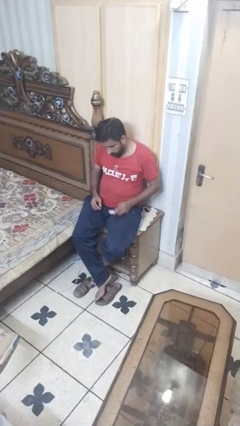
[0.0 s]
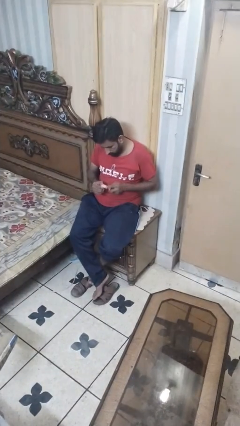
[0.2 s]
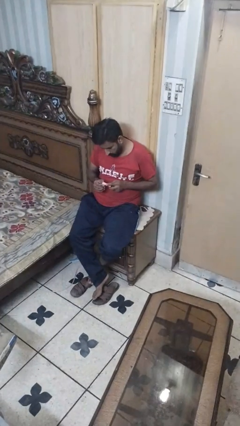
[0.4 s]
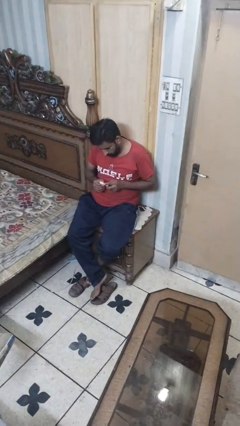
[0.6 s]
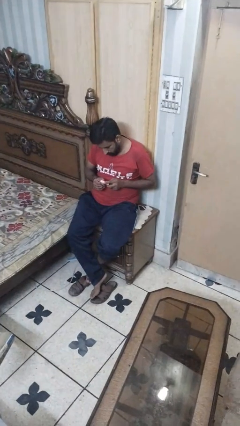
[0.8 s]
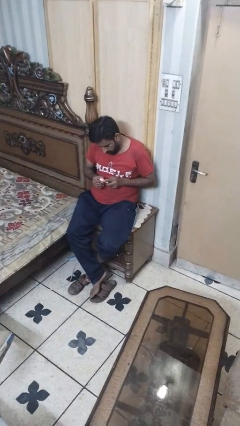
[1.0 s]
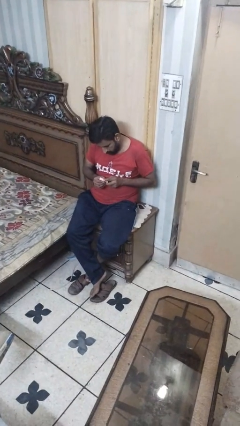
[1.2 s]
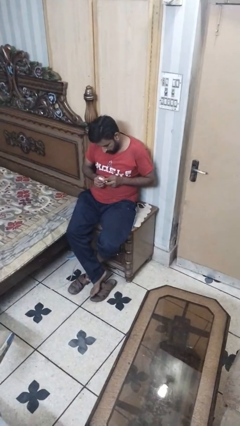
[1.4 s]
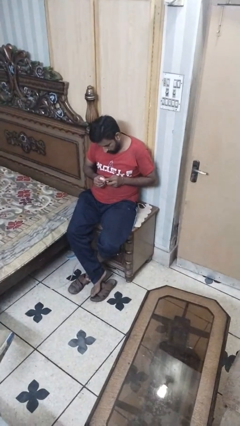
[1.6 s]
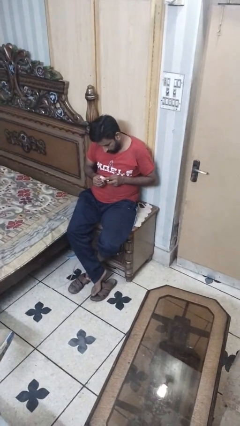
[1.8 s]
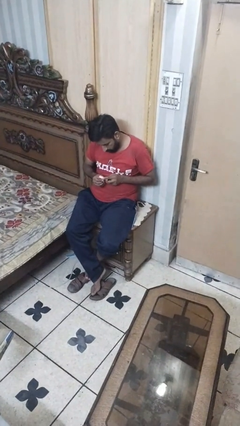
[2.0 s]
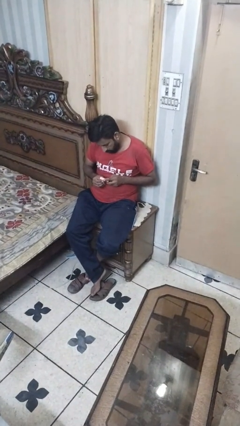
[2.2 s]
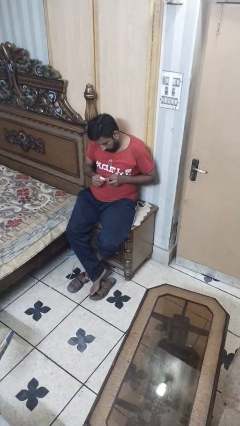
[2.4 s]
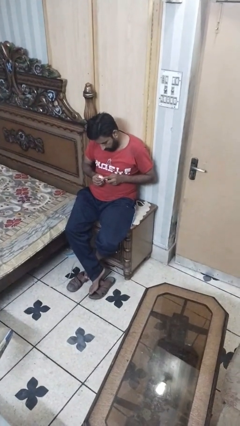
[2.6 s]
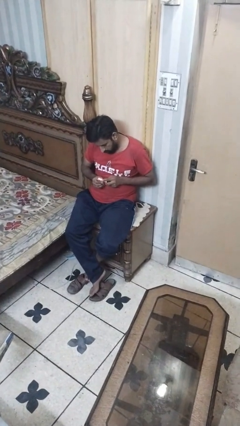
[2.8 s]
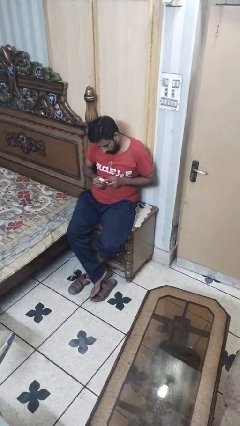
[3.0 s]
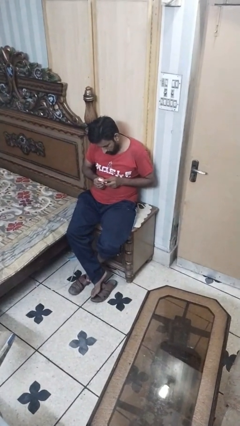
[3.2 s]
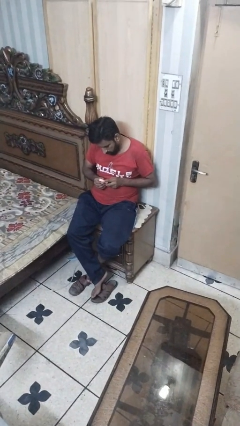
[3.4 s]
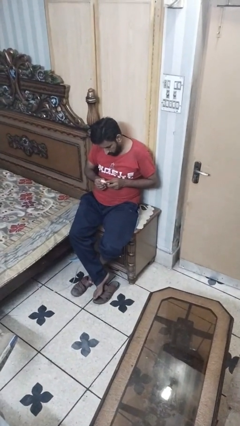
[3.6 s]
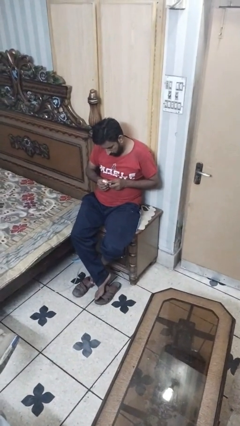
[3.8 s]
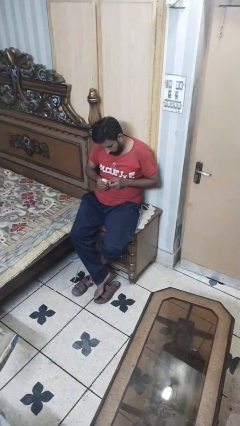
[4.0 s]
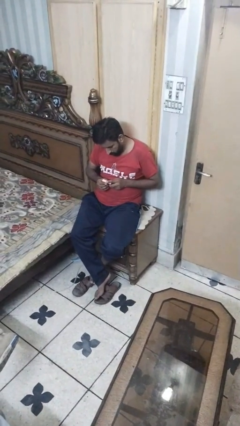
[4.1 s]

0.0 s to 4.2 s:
person files fingernails

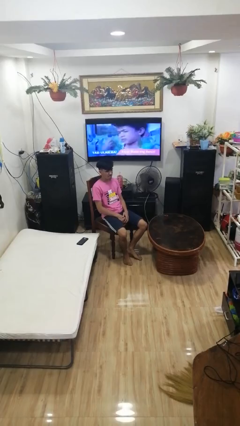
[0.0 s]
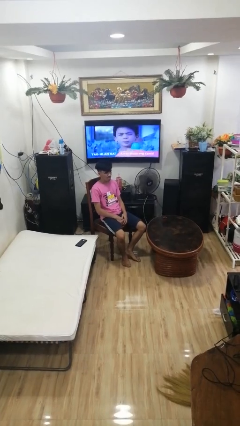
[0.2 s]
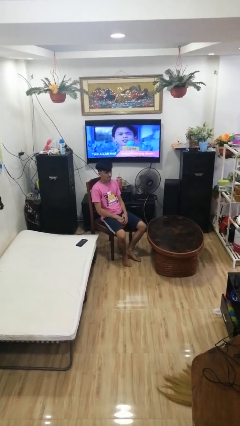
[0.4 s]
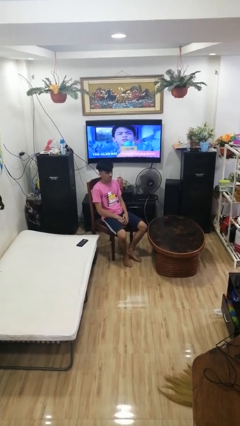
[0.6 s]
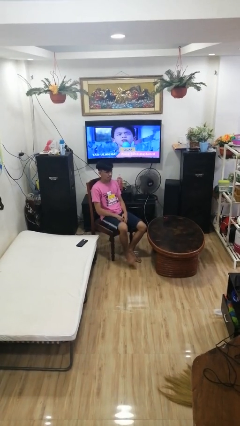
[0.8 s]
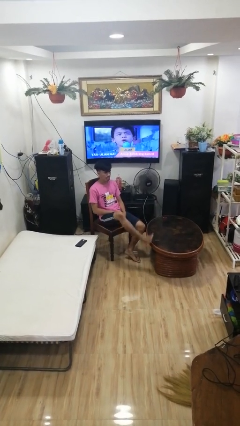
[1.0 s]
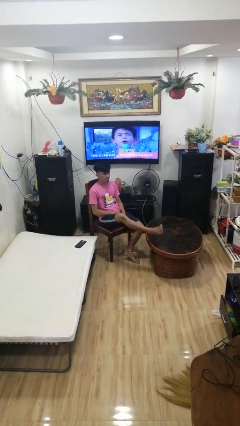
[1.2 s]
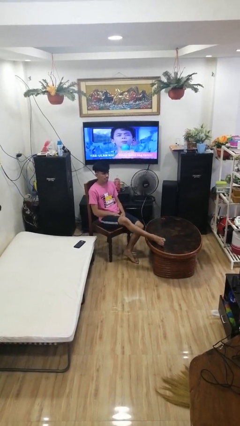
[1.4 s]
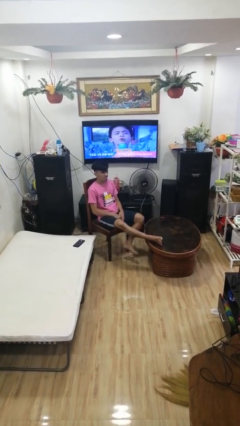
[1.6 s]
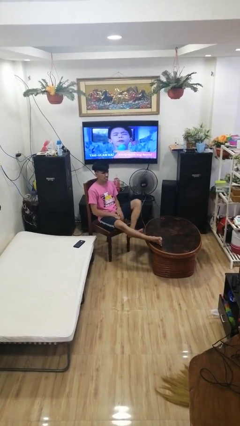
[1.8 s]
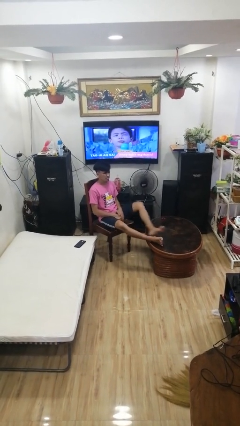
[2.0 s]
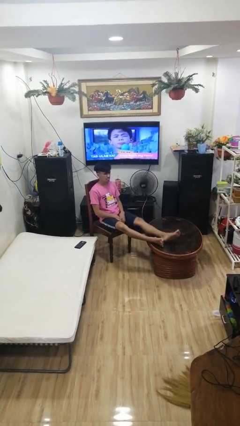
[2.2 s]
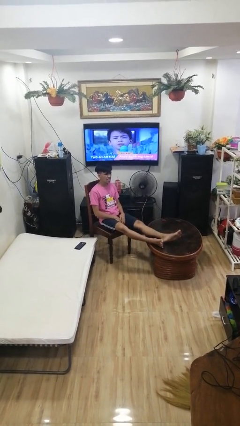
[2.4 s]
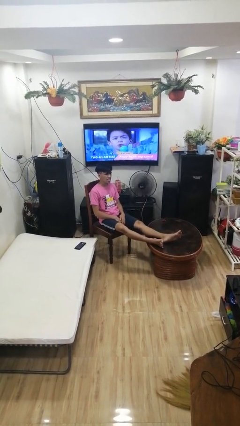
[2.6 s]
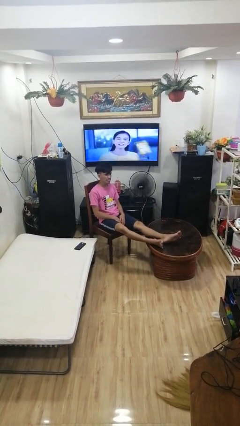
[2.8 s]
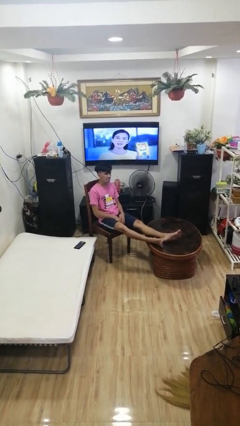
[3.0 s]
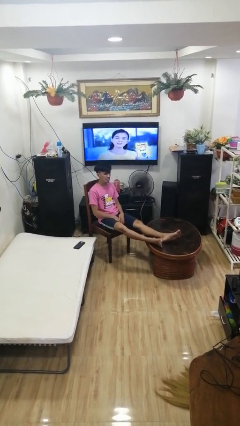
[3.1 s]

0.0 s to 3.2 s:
person puts feet up

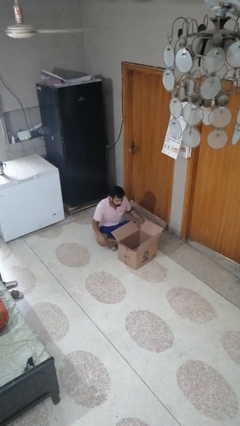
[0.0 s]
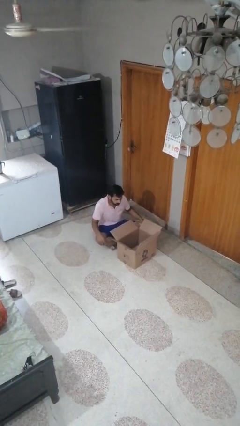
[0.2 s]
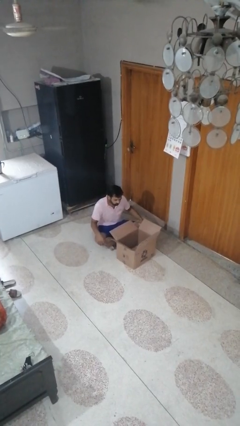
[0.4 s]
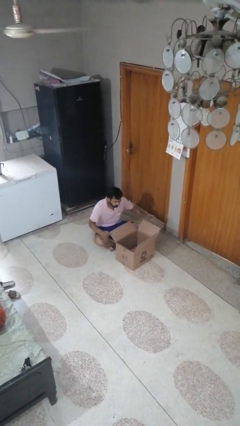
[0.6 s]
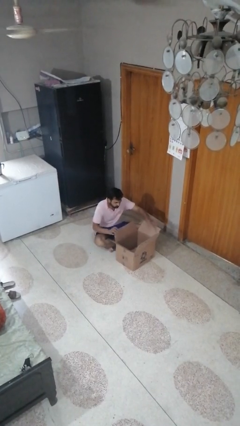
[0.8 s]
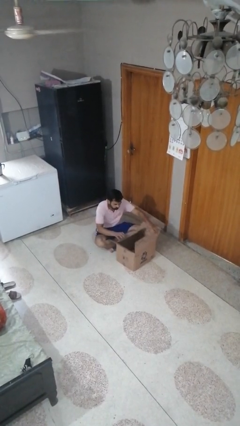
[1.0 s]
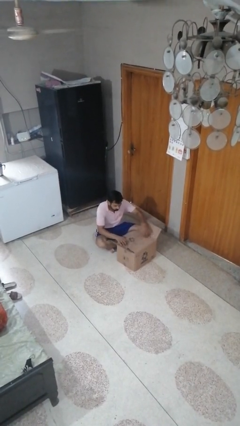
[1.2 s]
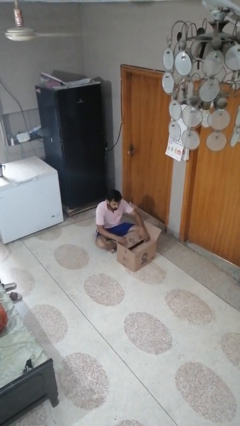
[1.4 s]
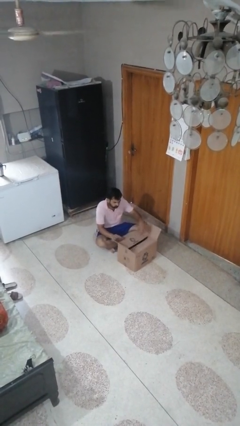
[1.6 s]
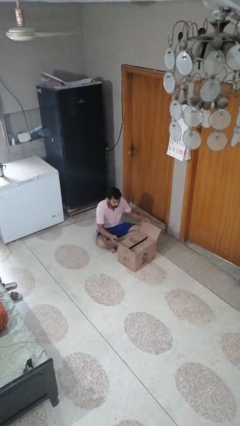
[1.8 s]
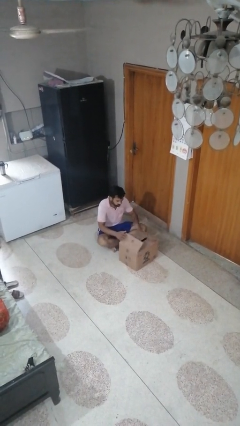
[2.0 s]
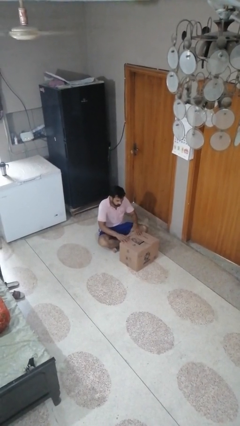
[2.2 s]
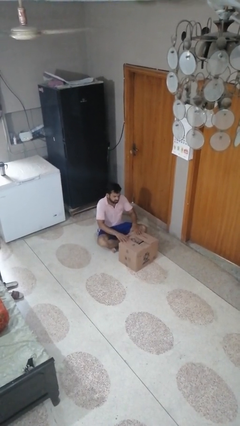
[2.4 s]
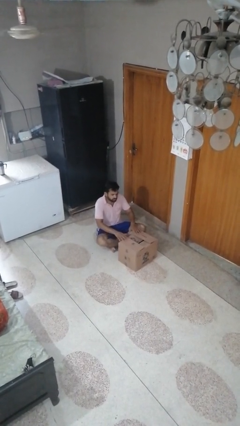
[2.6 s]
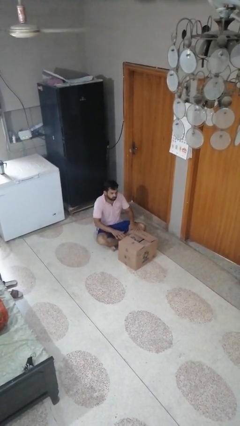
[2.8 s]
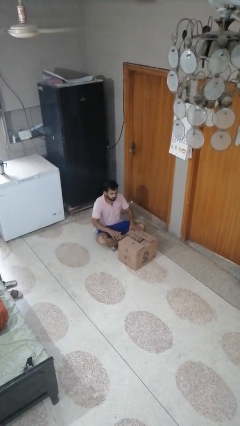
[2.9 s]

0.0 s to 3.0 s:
person closes box

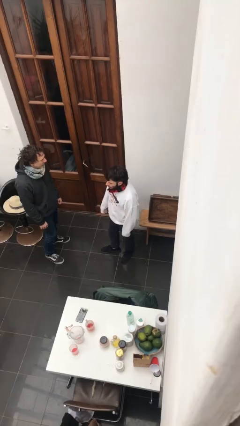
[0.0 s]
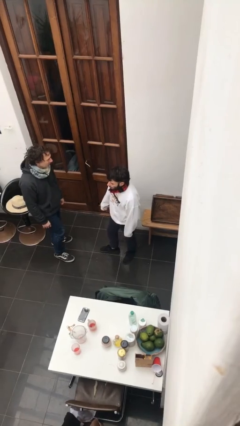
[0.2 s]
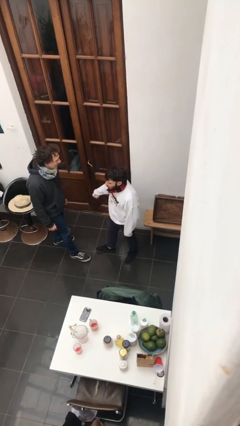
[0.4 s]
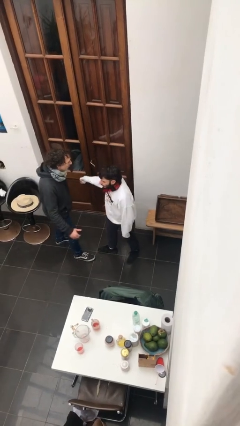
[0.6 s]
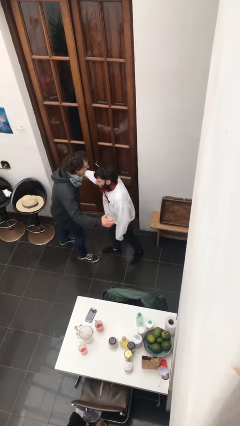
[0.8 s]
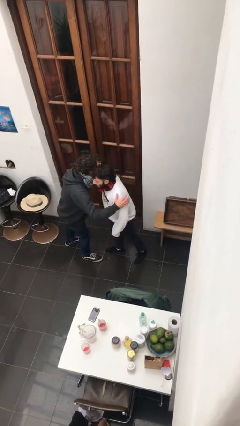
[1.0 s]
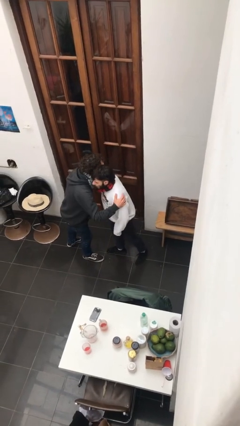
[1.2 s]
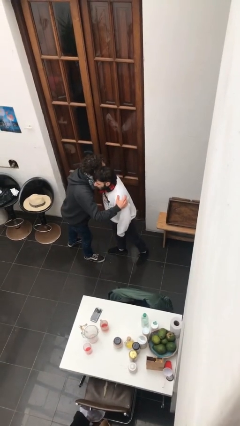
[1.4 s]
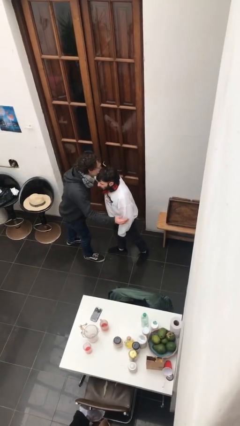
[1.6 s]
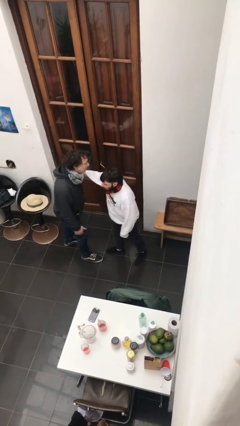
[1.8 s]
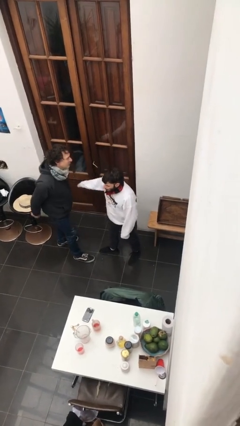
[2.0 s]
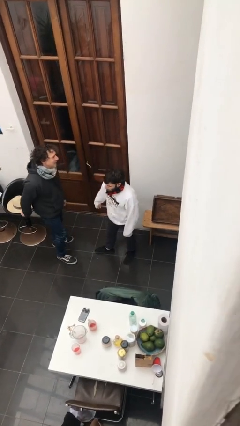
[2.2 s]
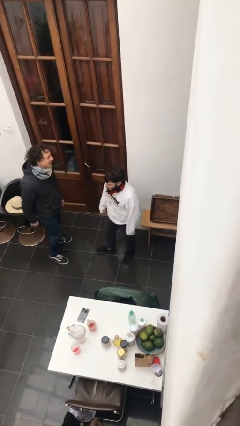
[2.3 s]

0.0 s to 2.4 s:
person kisses cheek of person

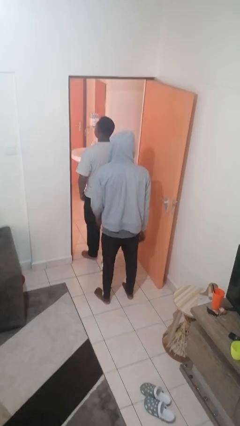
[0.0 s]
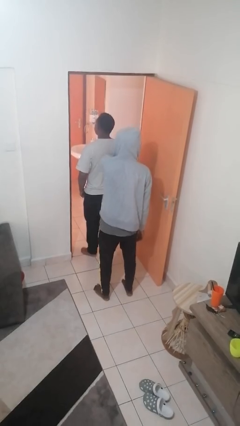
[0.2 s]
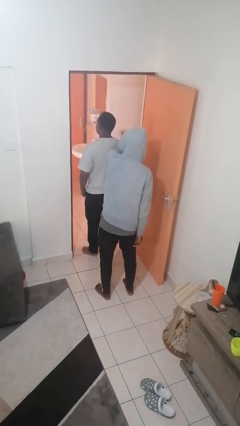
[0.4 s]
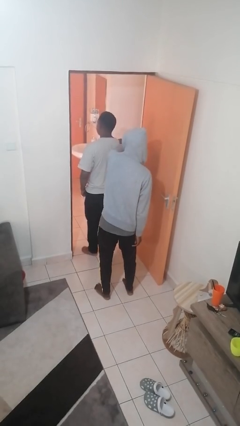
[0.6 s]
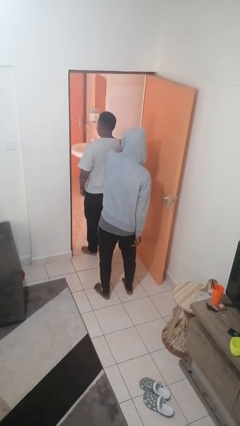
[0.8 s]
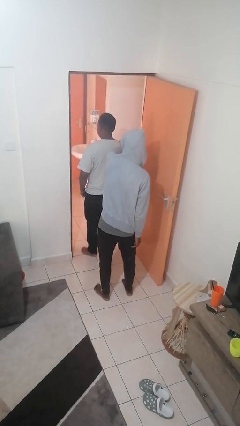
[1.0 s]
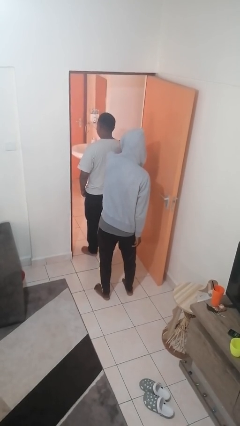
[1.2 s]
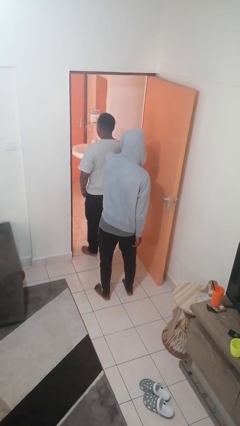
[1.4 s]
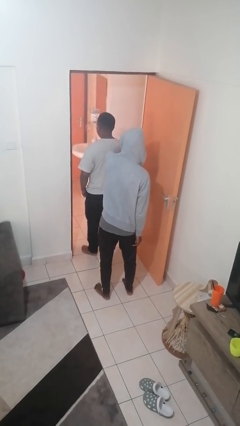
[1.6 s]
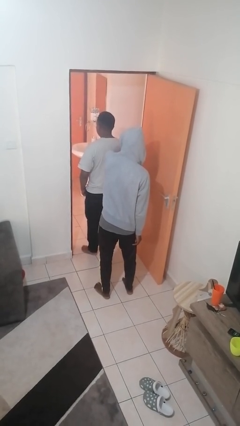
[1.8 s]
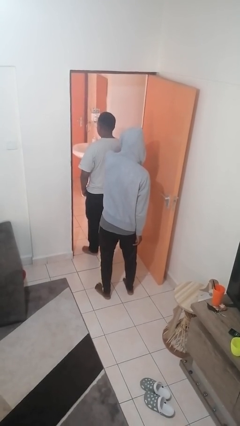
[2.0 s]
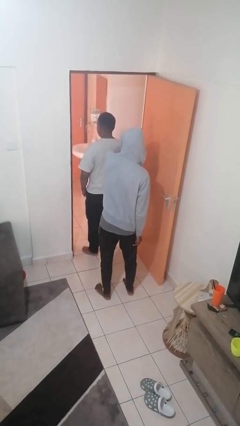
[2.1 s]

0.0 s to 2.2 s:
person grabs person by shoulder

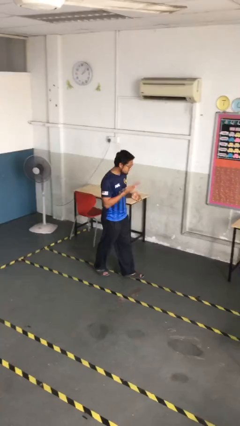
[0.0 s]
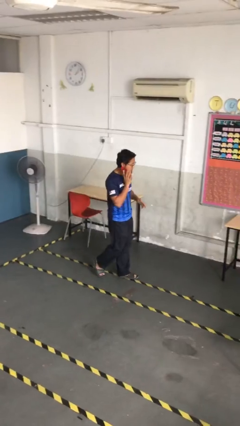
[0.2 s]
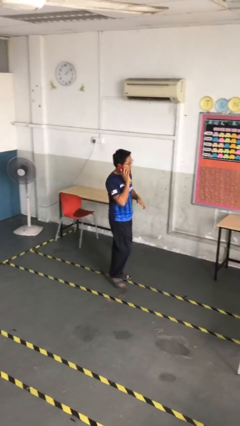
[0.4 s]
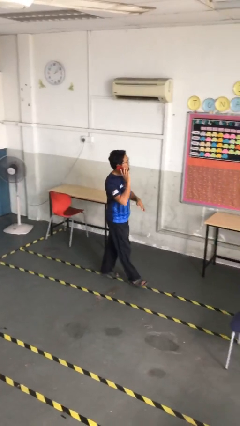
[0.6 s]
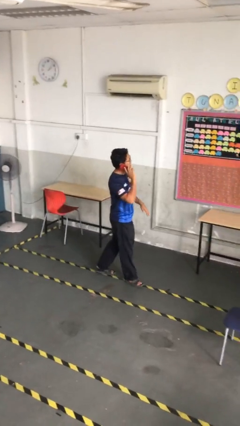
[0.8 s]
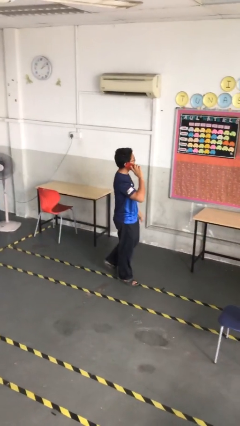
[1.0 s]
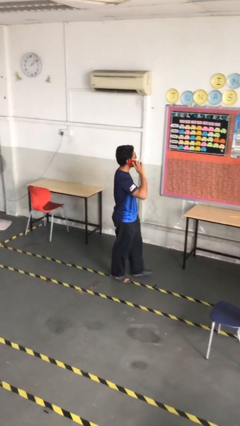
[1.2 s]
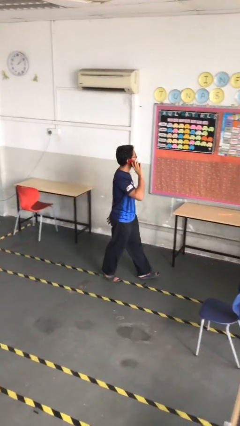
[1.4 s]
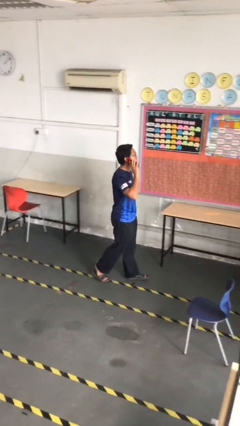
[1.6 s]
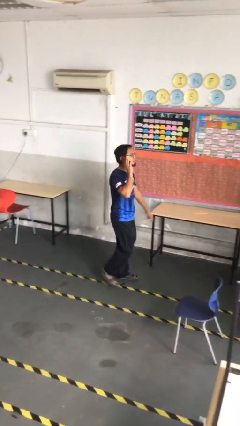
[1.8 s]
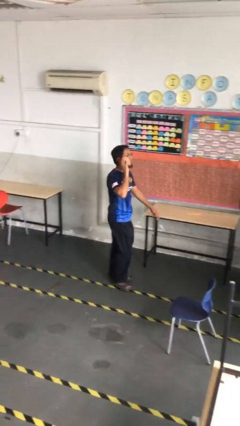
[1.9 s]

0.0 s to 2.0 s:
person talks on phone

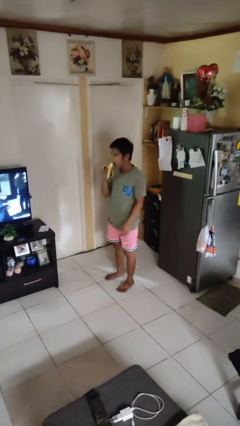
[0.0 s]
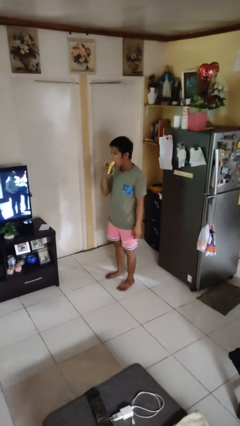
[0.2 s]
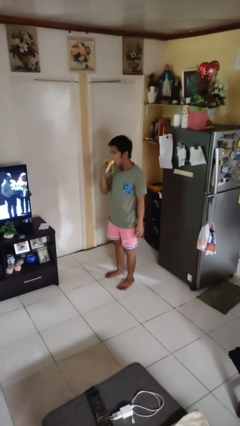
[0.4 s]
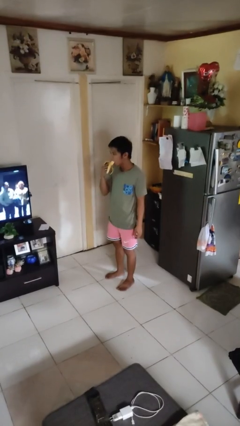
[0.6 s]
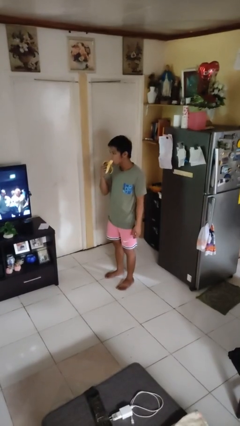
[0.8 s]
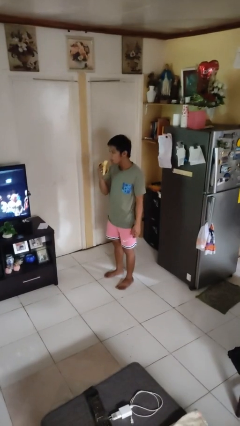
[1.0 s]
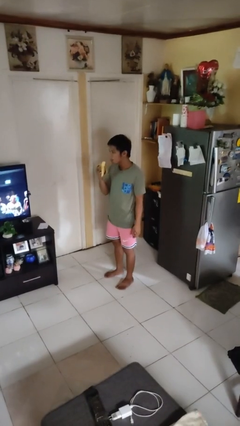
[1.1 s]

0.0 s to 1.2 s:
person eats banana
